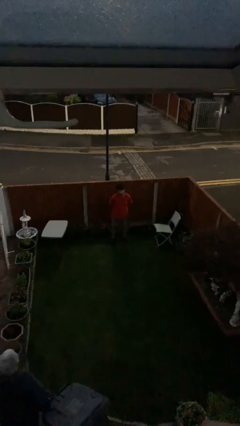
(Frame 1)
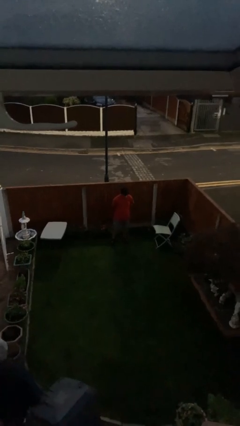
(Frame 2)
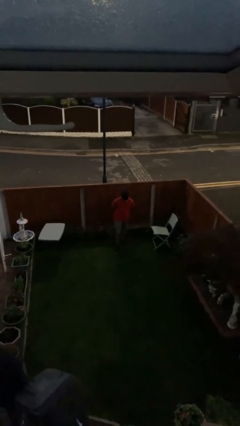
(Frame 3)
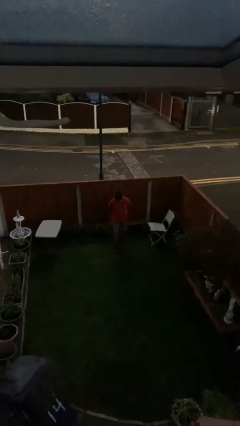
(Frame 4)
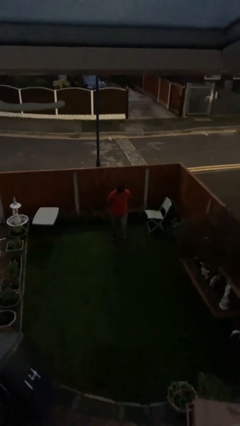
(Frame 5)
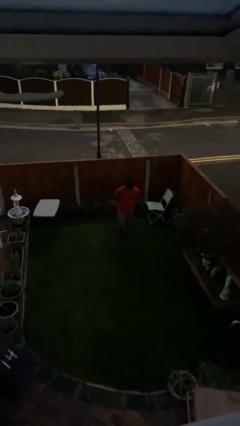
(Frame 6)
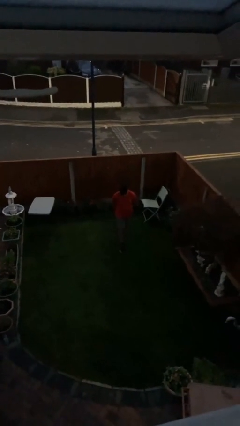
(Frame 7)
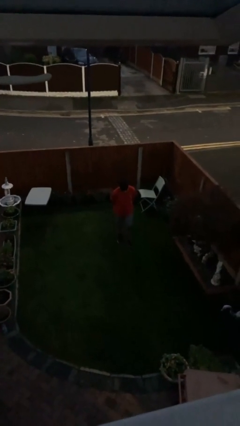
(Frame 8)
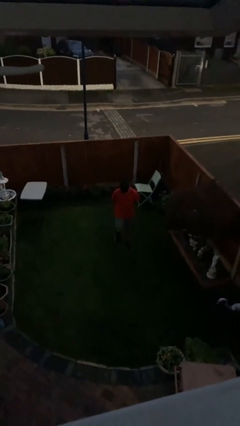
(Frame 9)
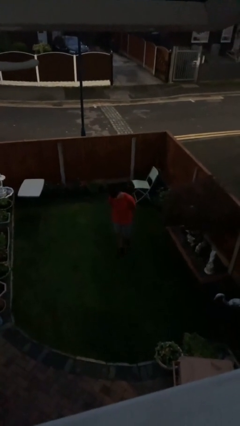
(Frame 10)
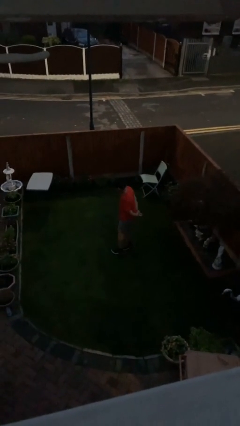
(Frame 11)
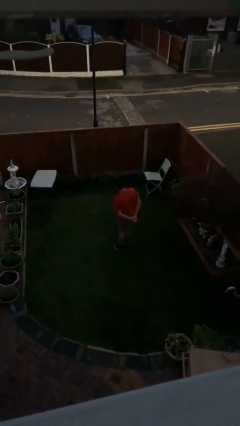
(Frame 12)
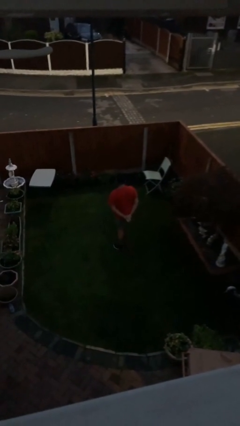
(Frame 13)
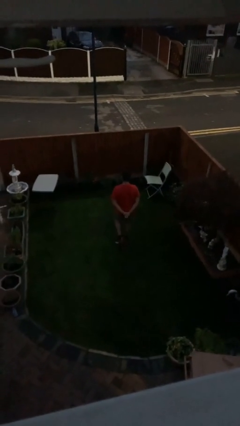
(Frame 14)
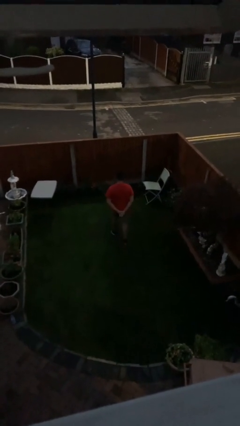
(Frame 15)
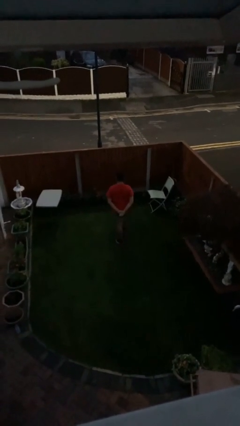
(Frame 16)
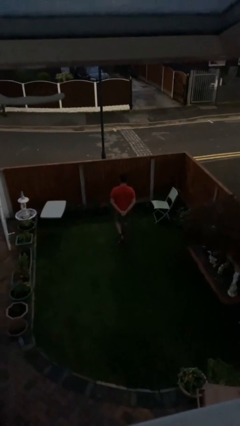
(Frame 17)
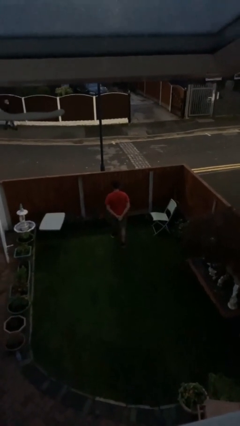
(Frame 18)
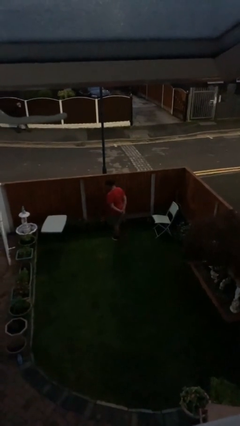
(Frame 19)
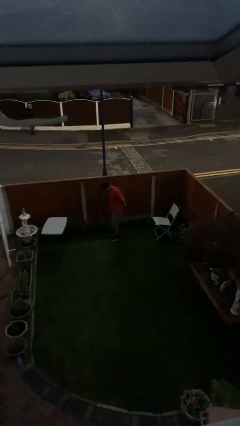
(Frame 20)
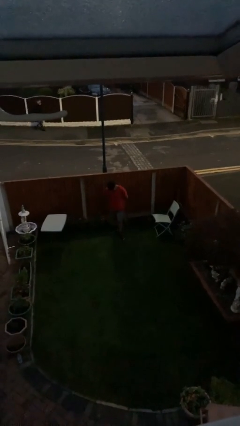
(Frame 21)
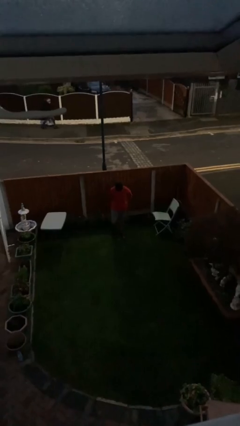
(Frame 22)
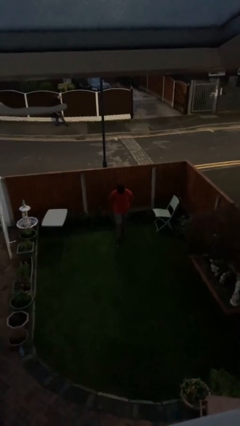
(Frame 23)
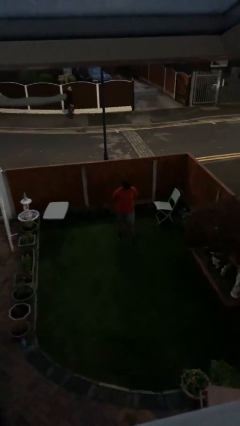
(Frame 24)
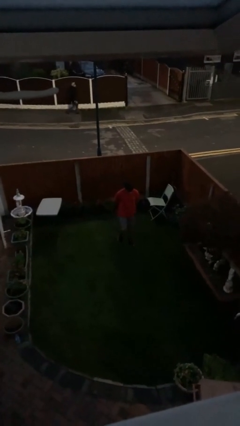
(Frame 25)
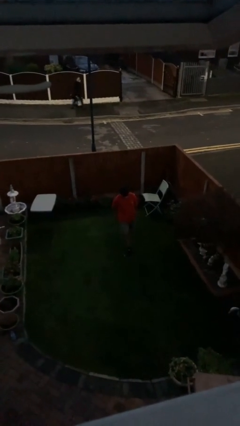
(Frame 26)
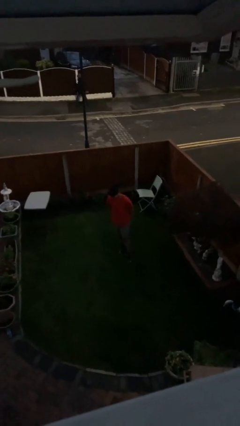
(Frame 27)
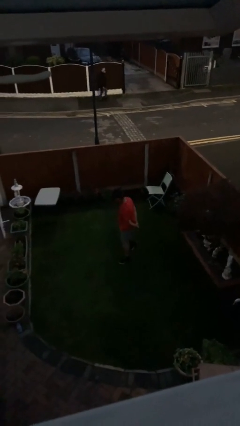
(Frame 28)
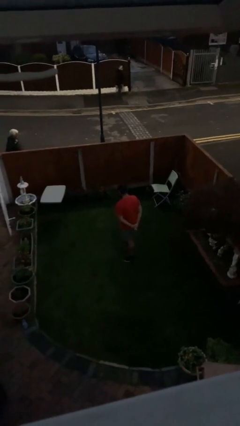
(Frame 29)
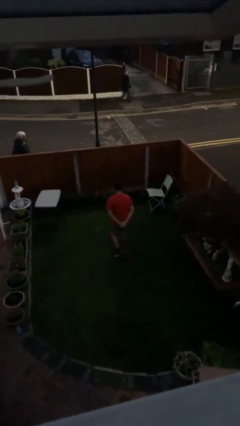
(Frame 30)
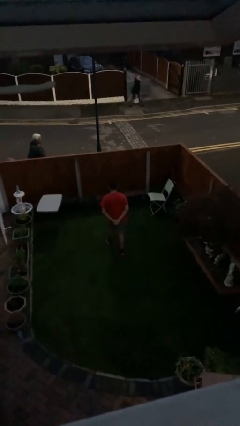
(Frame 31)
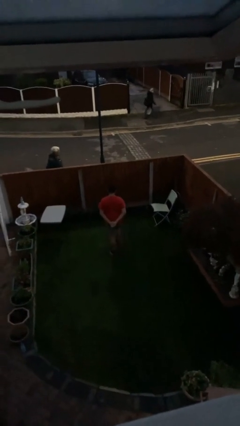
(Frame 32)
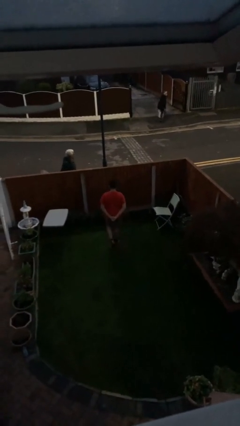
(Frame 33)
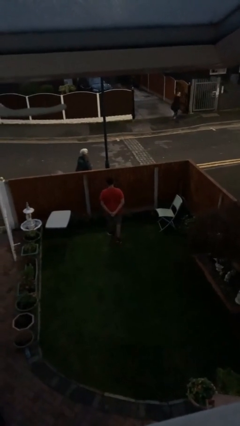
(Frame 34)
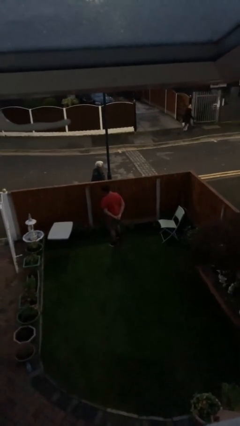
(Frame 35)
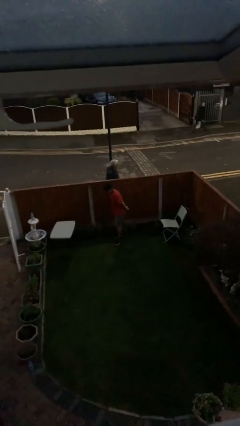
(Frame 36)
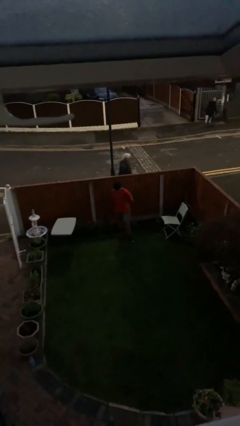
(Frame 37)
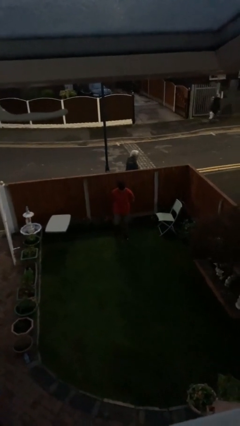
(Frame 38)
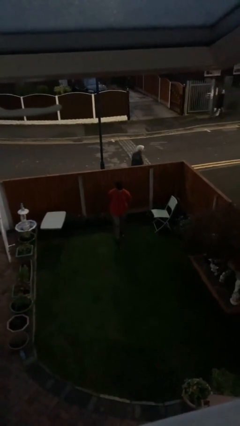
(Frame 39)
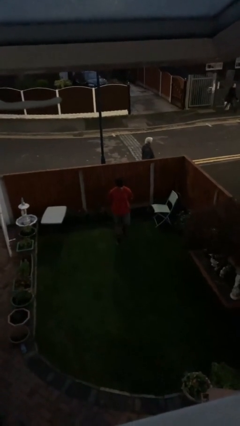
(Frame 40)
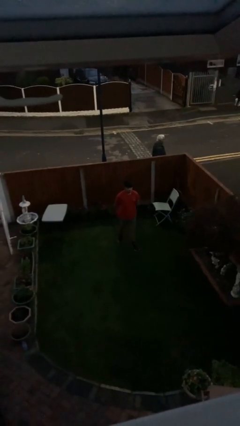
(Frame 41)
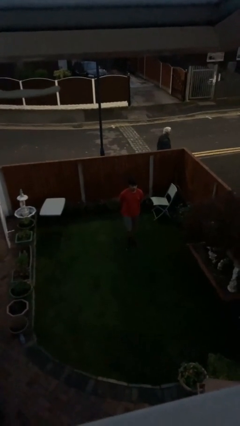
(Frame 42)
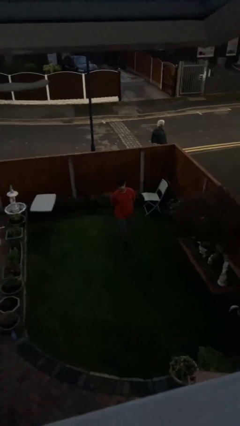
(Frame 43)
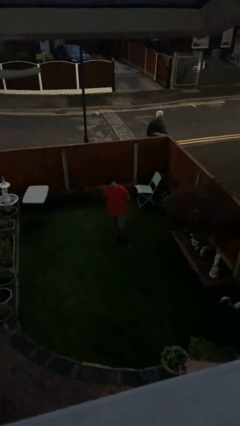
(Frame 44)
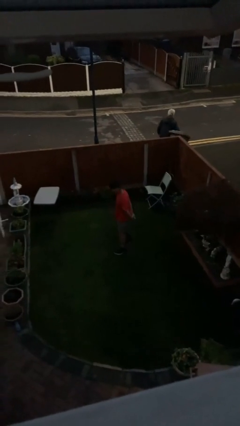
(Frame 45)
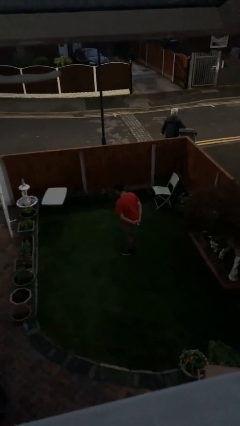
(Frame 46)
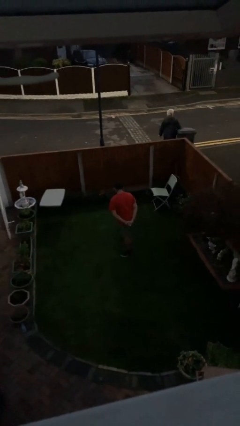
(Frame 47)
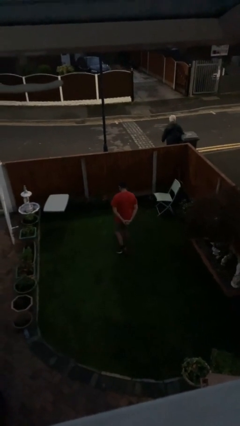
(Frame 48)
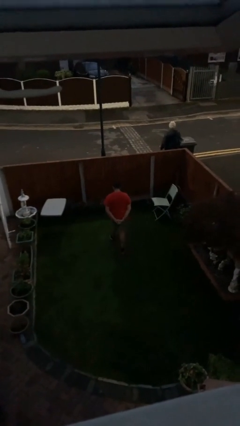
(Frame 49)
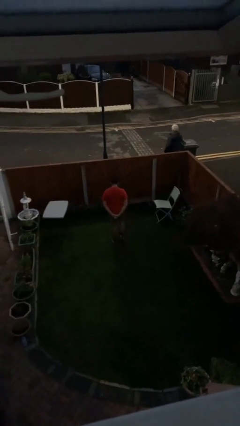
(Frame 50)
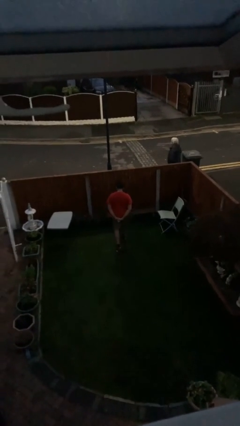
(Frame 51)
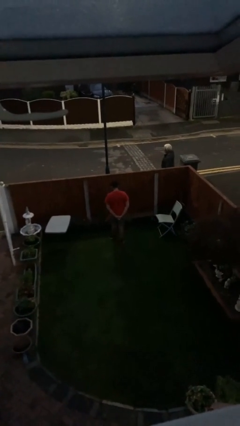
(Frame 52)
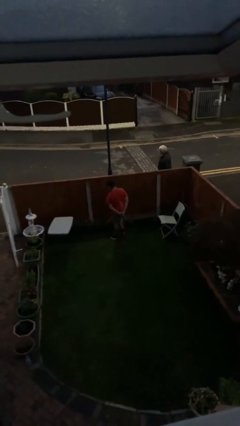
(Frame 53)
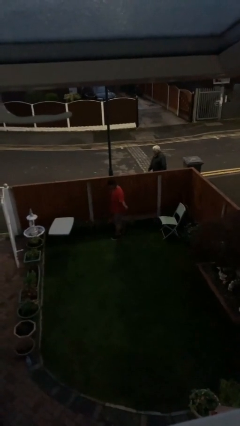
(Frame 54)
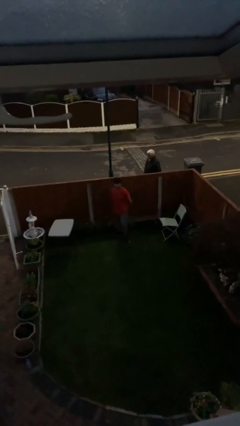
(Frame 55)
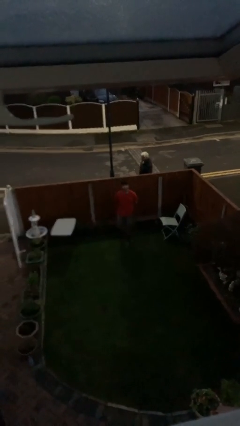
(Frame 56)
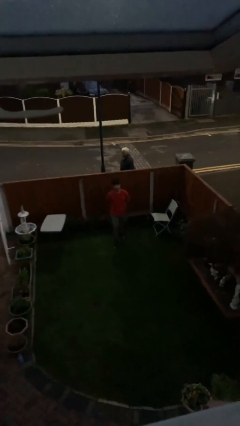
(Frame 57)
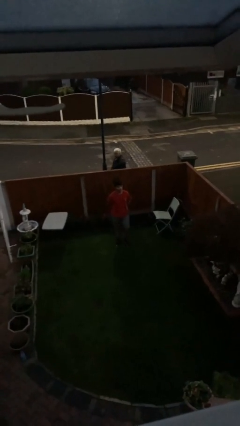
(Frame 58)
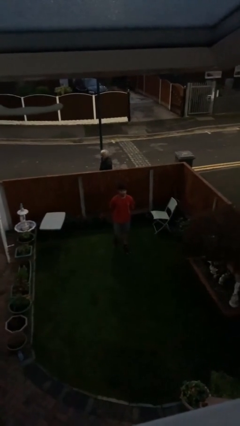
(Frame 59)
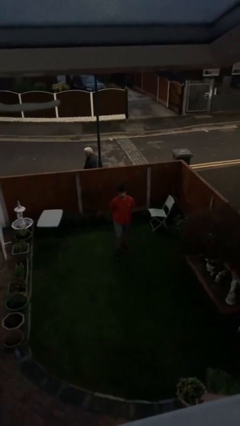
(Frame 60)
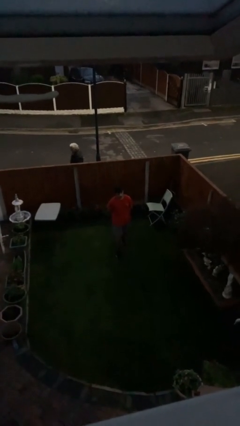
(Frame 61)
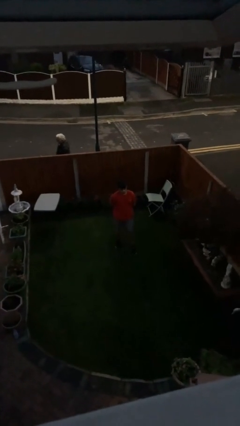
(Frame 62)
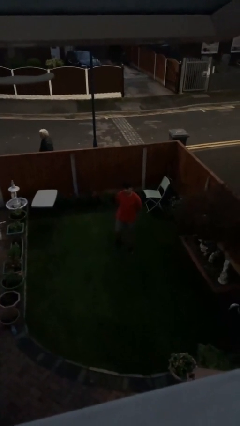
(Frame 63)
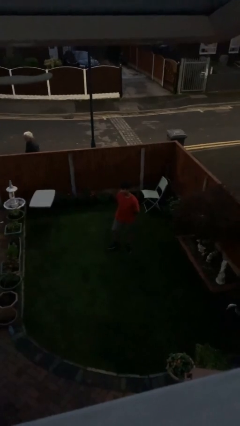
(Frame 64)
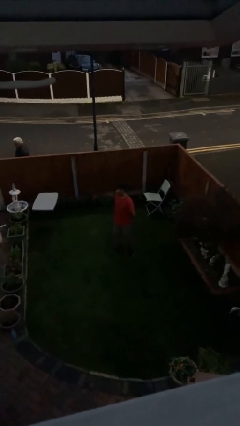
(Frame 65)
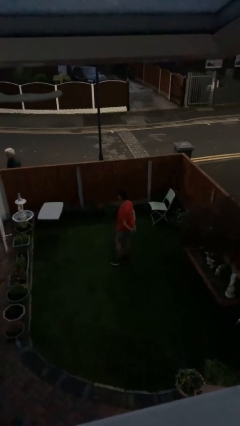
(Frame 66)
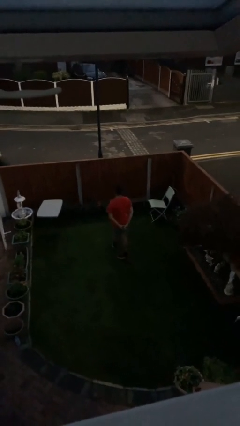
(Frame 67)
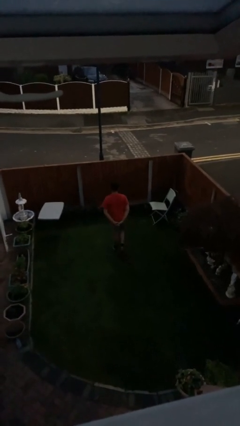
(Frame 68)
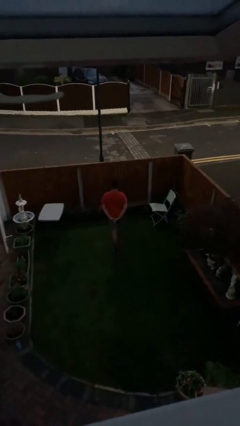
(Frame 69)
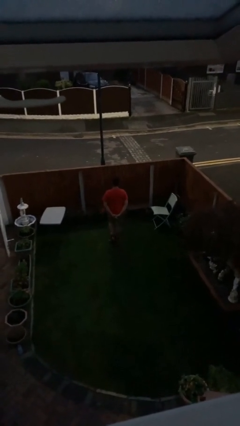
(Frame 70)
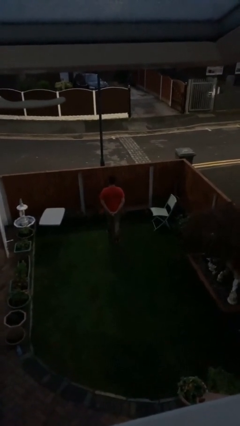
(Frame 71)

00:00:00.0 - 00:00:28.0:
person walks

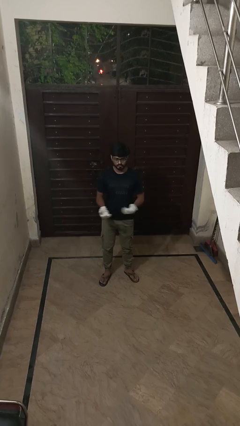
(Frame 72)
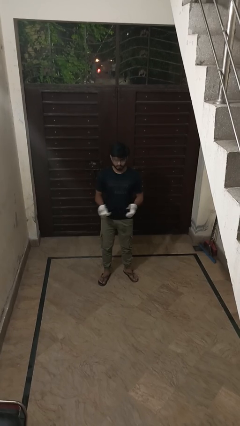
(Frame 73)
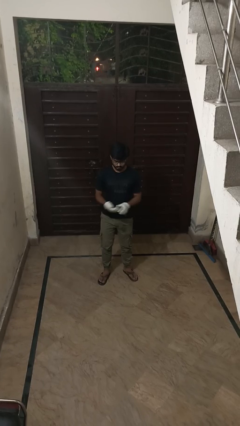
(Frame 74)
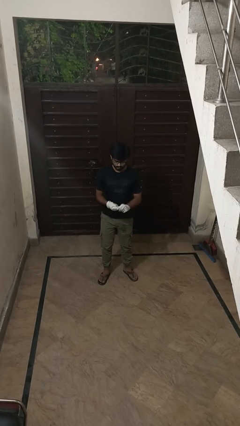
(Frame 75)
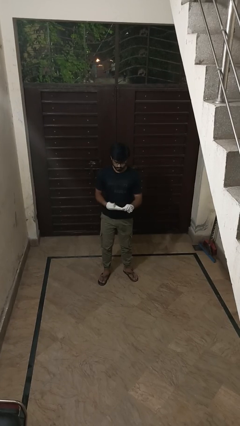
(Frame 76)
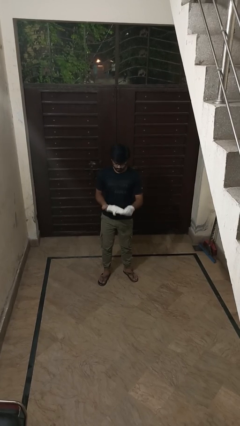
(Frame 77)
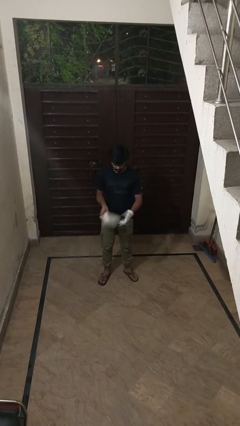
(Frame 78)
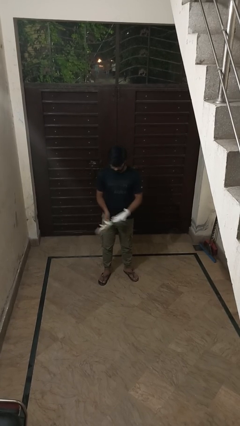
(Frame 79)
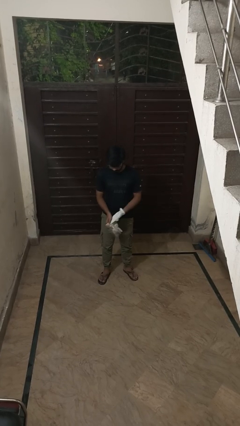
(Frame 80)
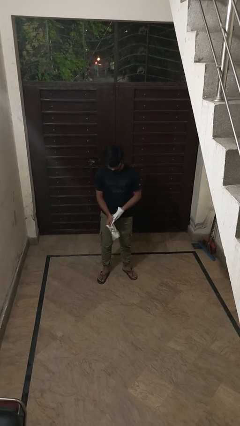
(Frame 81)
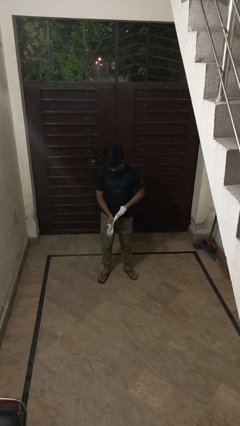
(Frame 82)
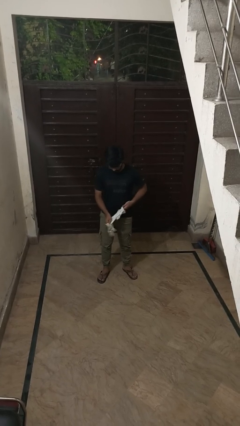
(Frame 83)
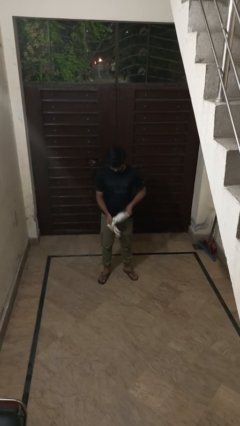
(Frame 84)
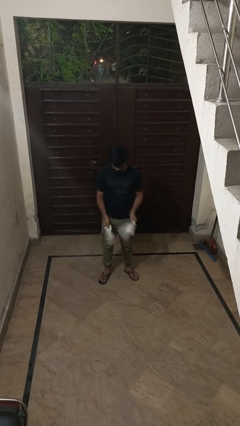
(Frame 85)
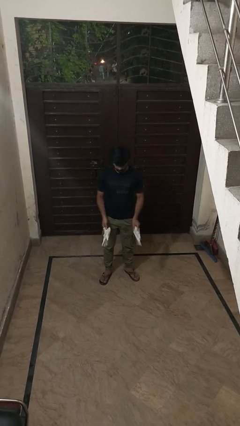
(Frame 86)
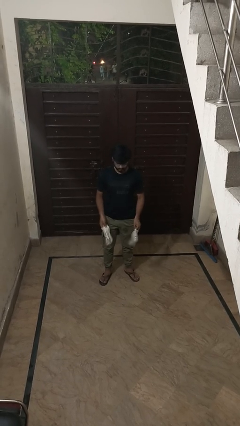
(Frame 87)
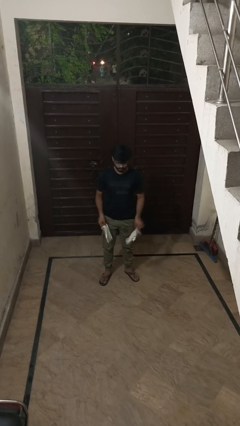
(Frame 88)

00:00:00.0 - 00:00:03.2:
person takes off gloves

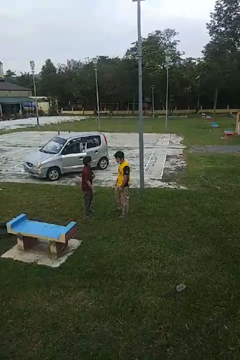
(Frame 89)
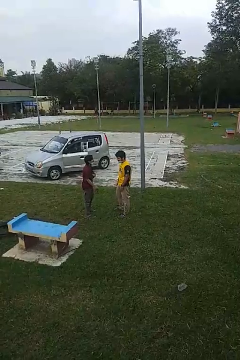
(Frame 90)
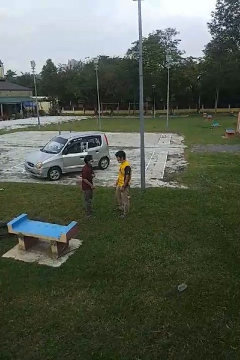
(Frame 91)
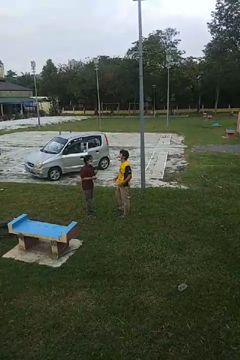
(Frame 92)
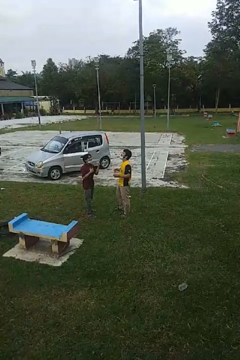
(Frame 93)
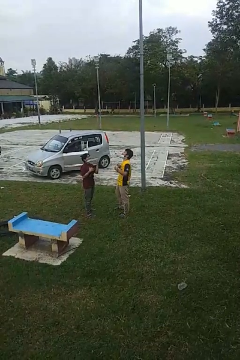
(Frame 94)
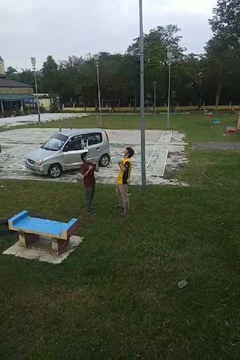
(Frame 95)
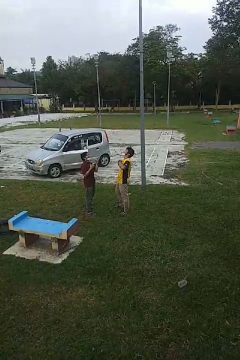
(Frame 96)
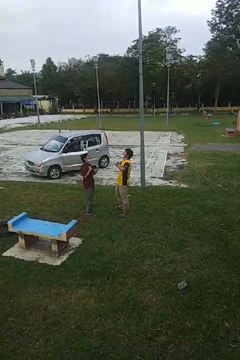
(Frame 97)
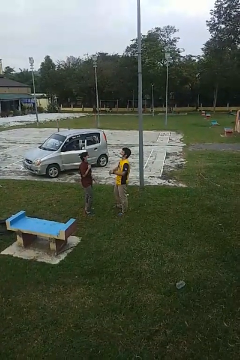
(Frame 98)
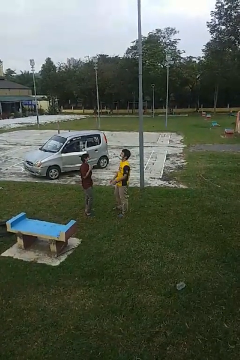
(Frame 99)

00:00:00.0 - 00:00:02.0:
person laughs with person
